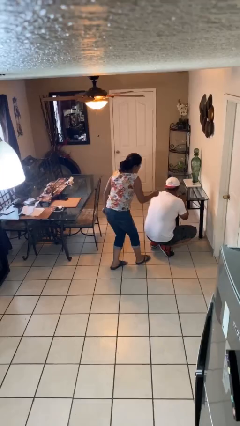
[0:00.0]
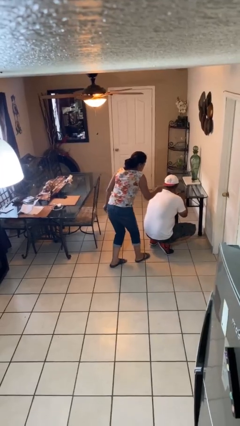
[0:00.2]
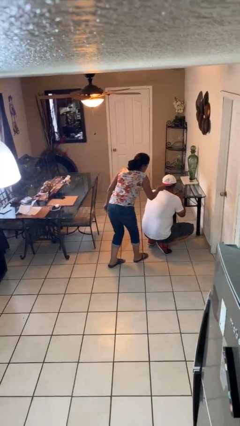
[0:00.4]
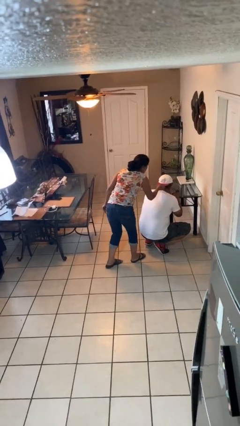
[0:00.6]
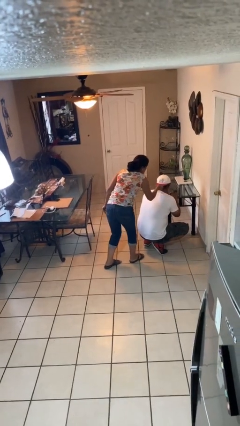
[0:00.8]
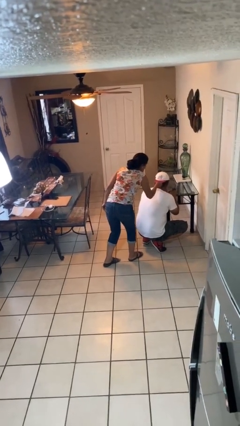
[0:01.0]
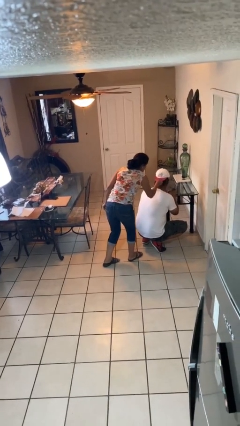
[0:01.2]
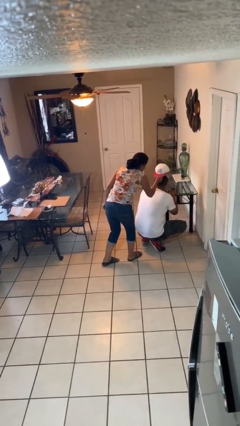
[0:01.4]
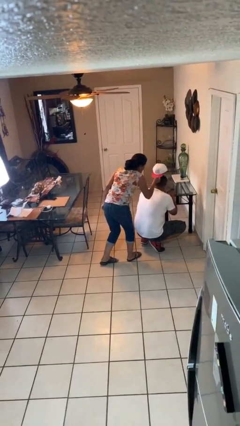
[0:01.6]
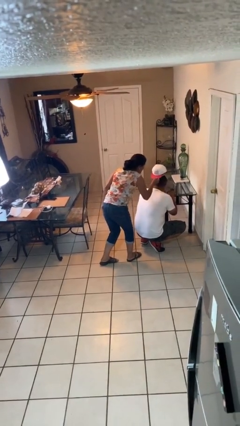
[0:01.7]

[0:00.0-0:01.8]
person steals object from person

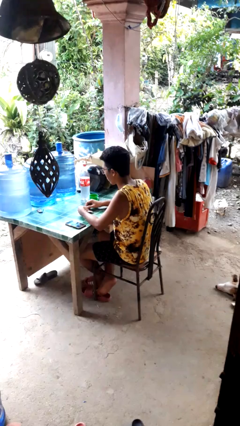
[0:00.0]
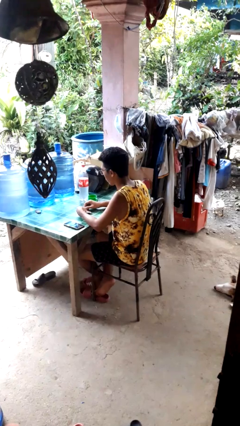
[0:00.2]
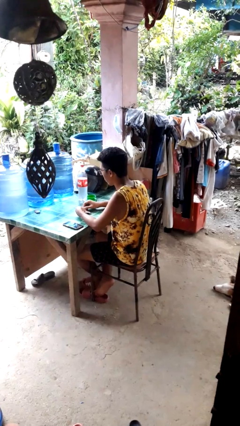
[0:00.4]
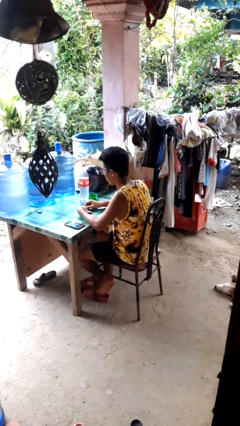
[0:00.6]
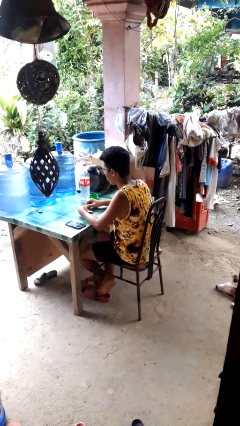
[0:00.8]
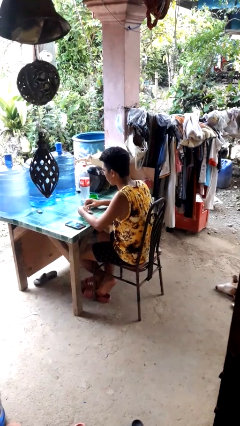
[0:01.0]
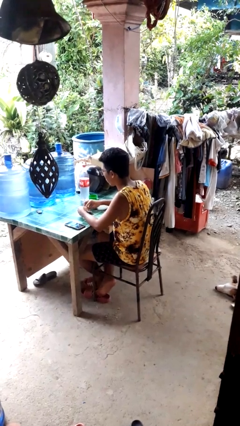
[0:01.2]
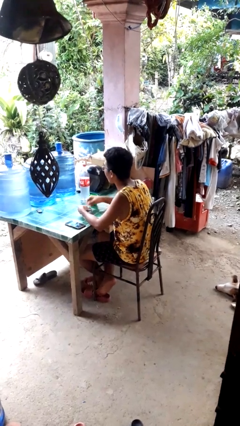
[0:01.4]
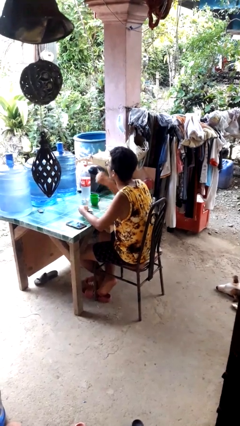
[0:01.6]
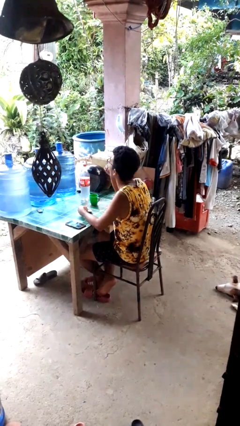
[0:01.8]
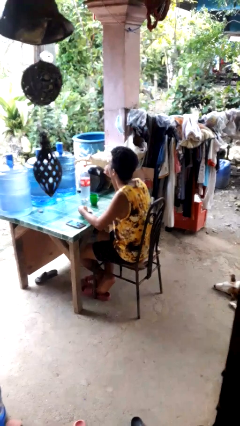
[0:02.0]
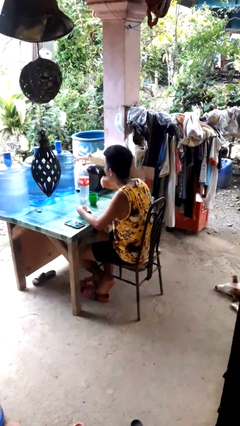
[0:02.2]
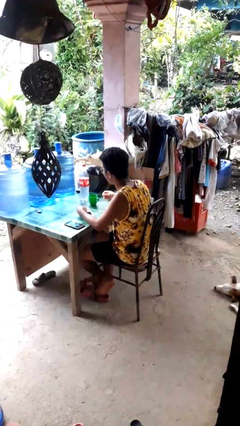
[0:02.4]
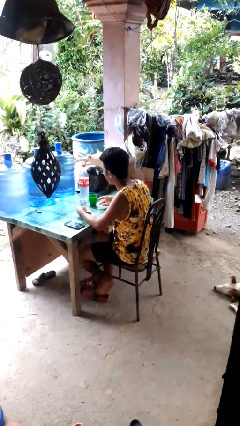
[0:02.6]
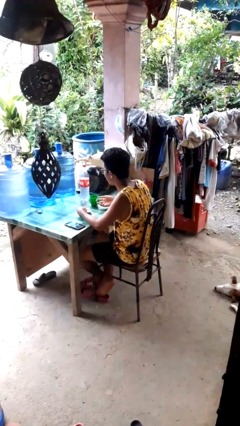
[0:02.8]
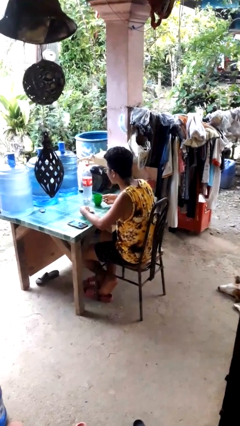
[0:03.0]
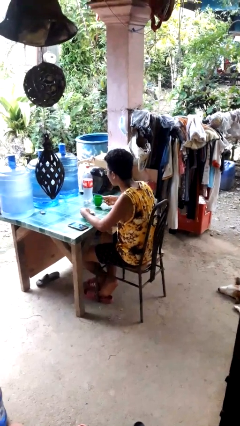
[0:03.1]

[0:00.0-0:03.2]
person takes medicine pills

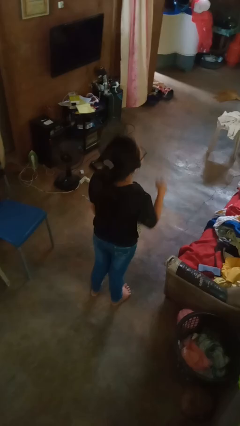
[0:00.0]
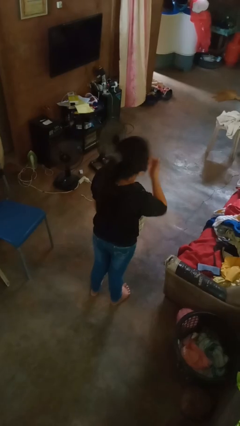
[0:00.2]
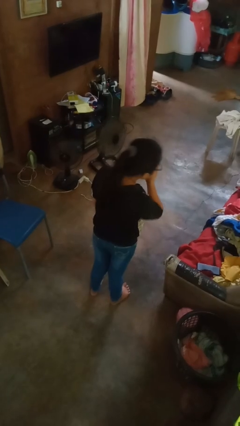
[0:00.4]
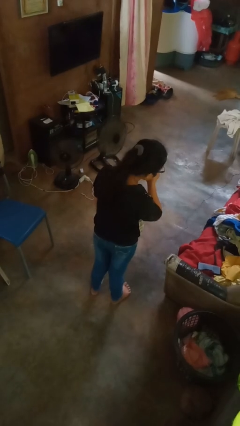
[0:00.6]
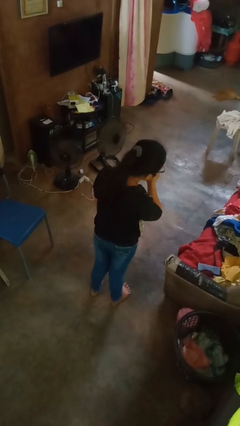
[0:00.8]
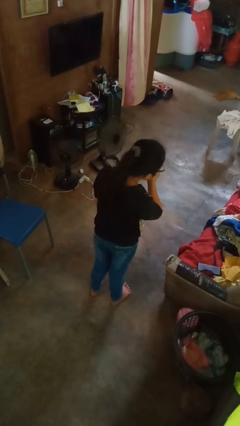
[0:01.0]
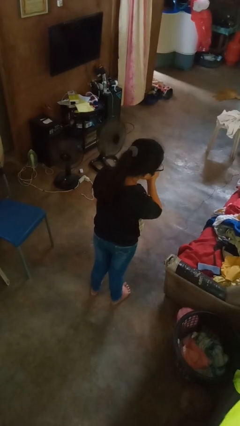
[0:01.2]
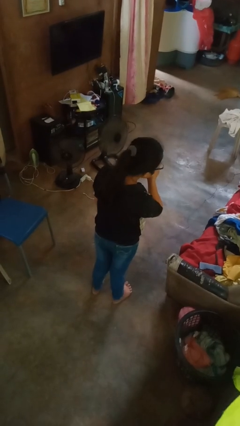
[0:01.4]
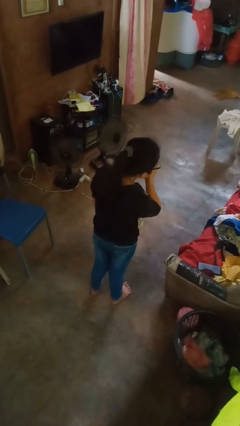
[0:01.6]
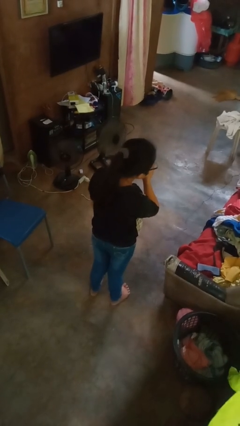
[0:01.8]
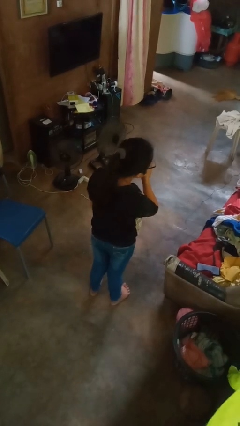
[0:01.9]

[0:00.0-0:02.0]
person sneezes into hand

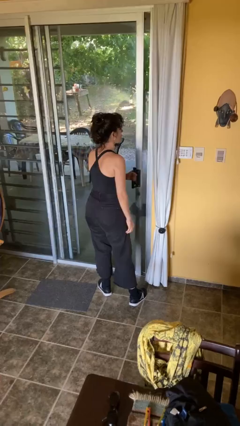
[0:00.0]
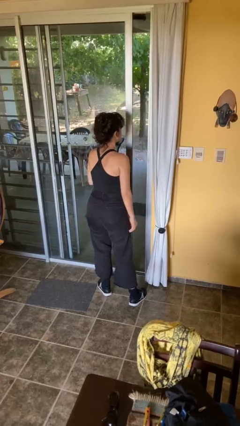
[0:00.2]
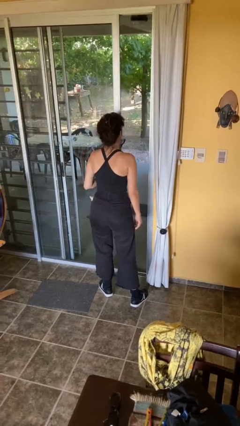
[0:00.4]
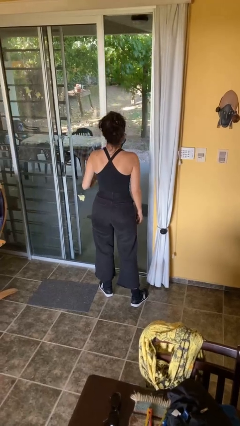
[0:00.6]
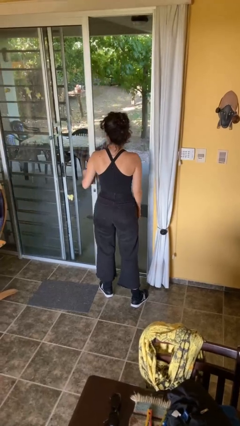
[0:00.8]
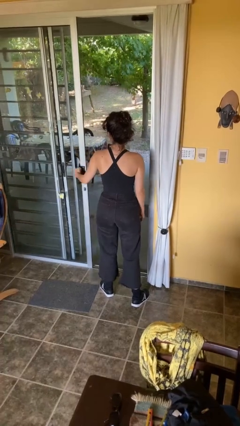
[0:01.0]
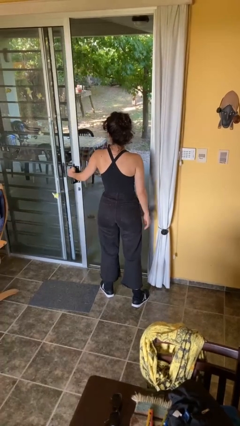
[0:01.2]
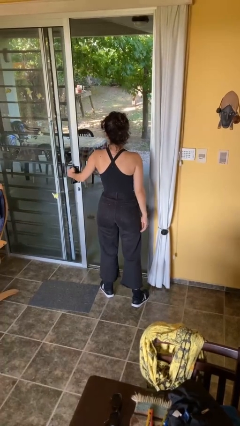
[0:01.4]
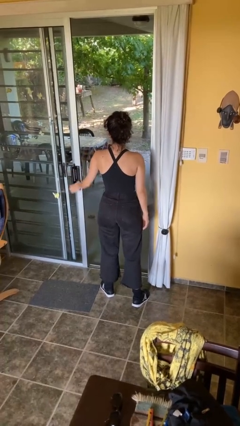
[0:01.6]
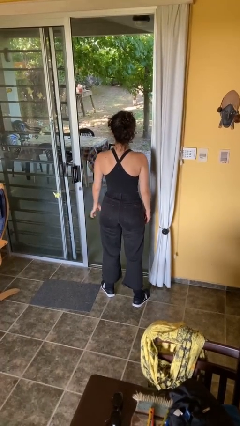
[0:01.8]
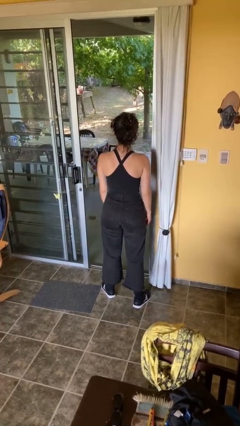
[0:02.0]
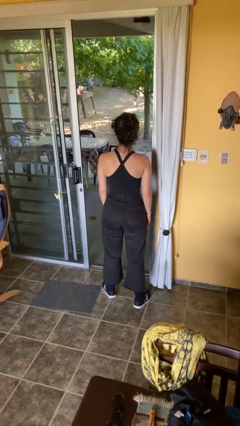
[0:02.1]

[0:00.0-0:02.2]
person opens facility door

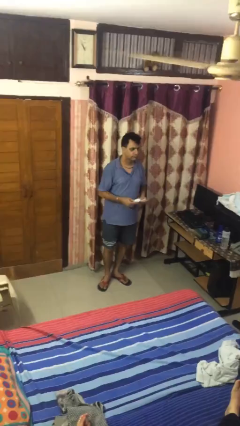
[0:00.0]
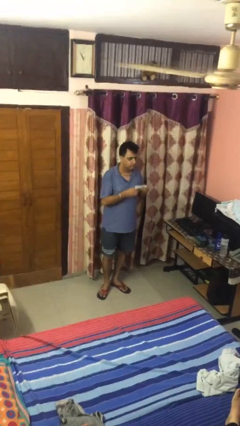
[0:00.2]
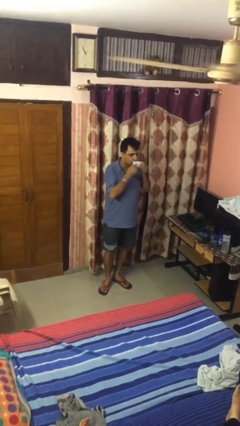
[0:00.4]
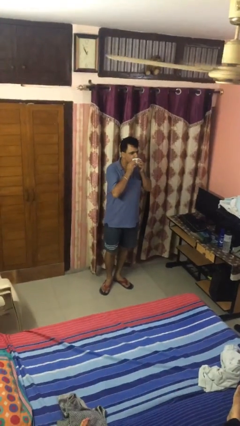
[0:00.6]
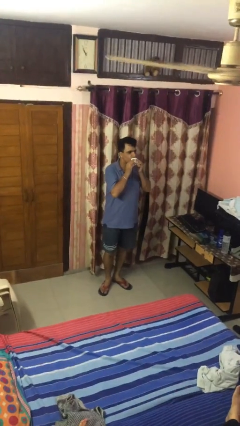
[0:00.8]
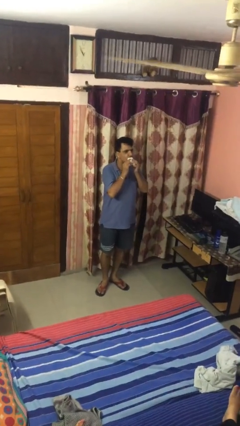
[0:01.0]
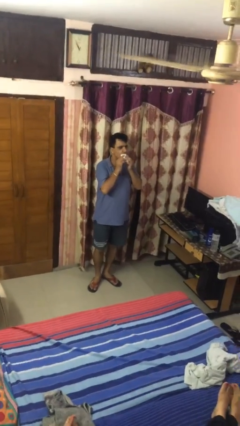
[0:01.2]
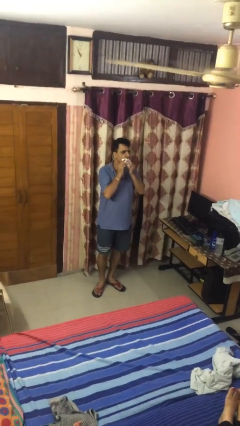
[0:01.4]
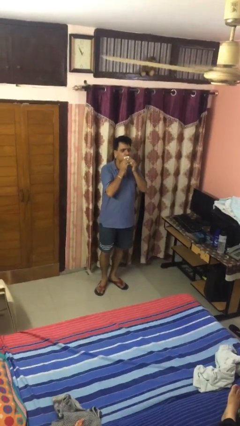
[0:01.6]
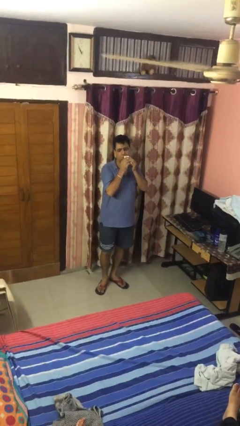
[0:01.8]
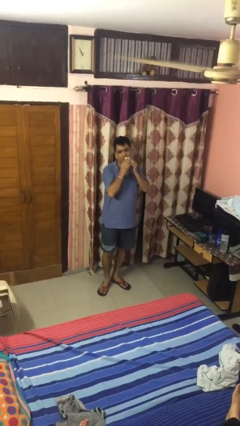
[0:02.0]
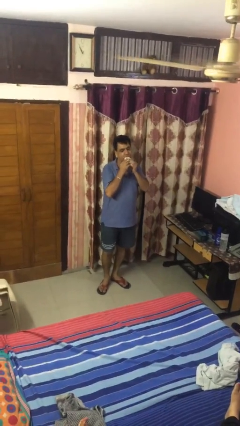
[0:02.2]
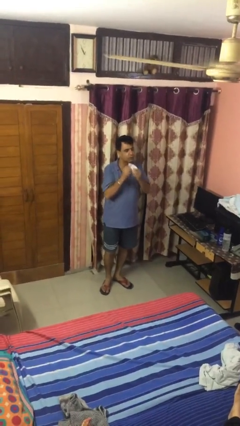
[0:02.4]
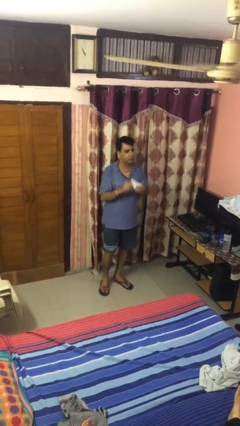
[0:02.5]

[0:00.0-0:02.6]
person wipes mouth with napkin

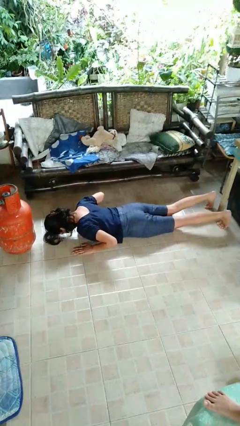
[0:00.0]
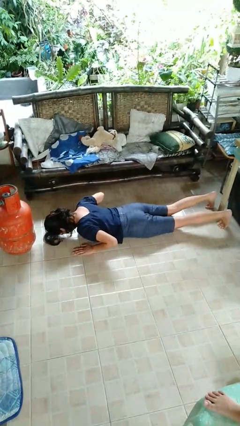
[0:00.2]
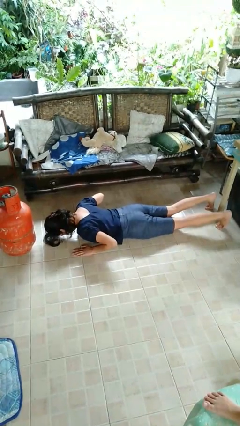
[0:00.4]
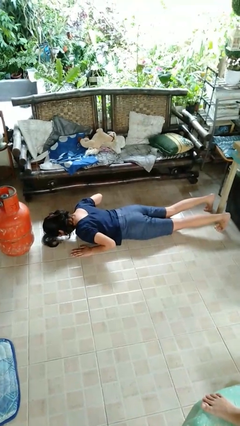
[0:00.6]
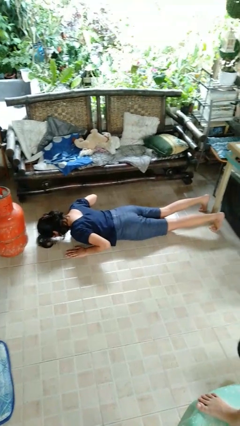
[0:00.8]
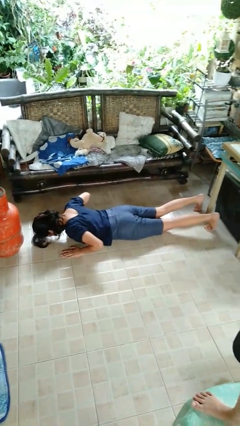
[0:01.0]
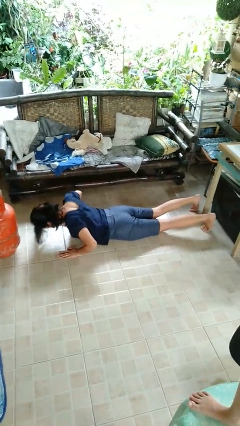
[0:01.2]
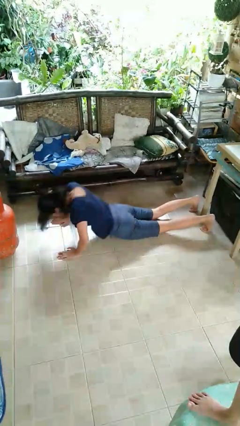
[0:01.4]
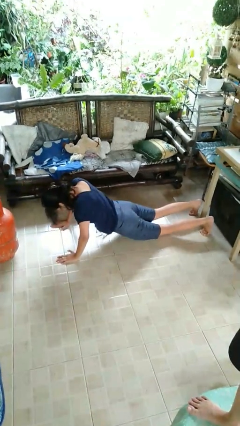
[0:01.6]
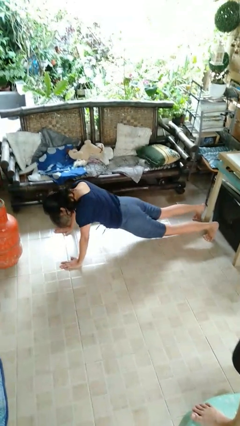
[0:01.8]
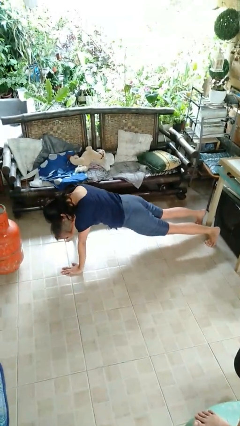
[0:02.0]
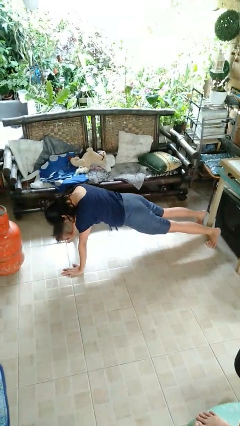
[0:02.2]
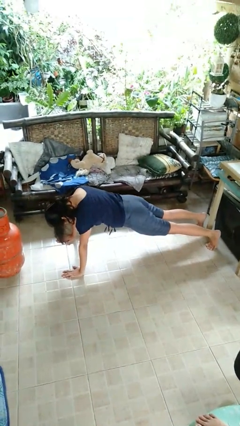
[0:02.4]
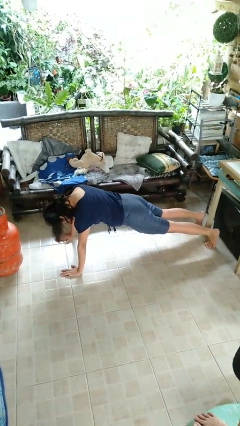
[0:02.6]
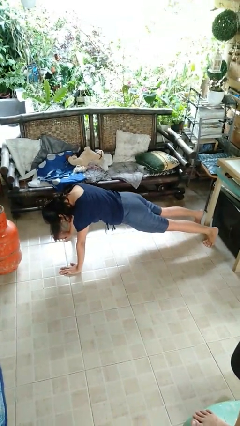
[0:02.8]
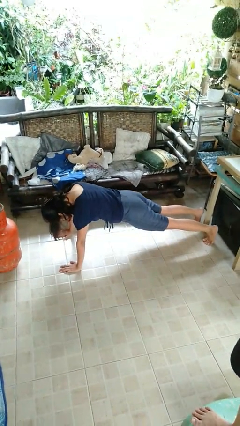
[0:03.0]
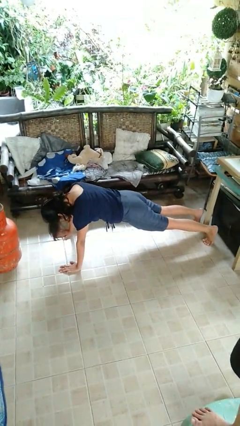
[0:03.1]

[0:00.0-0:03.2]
person exercises with pushup

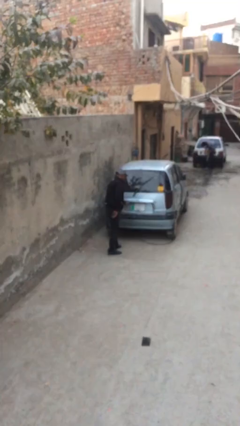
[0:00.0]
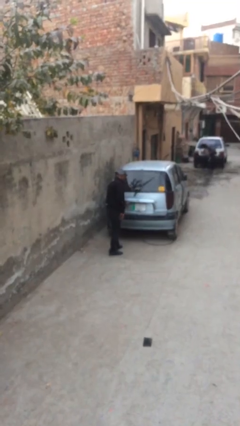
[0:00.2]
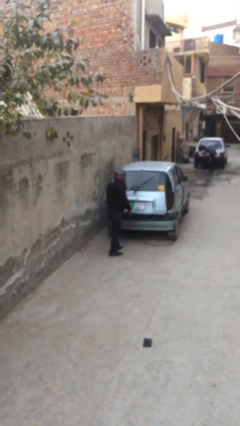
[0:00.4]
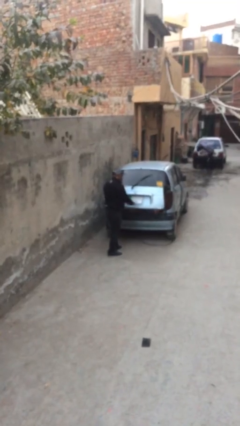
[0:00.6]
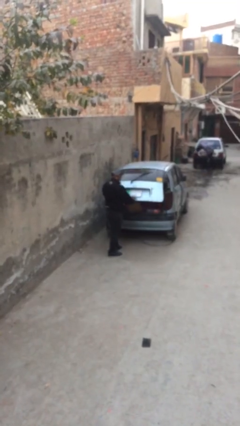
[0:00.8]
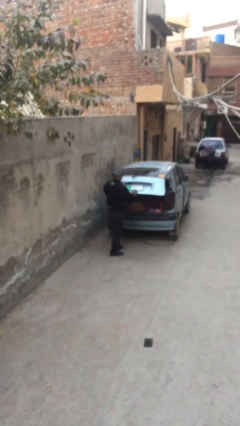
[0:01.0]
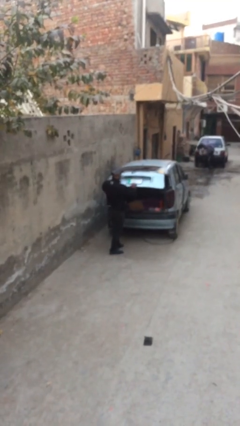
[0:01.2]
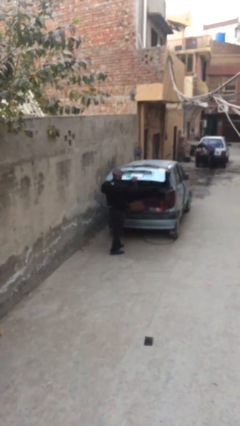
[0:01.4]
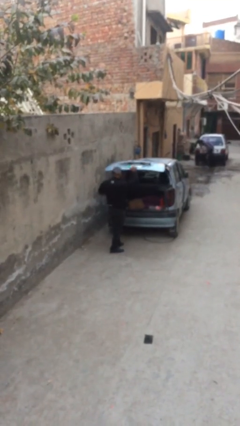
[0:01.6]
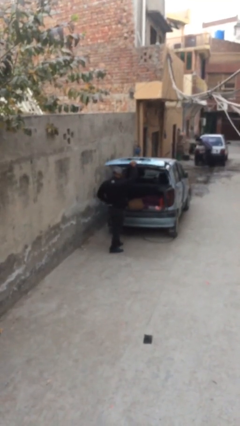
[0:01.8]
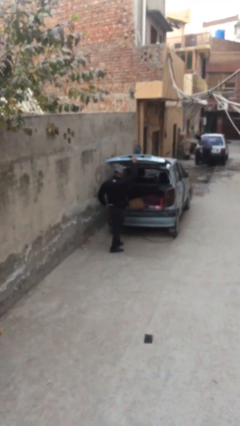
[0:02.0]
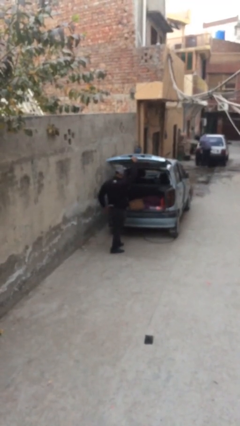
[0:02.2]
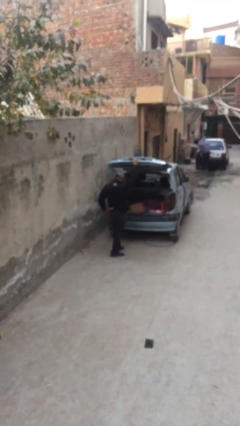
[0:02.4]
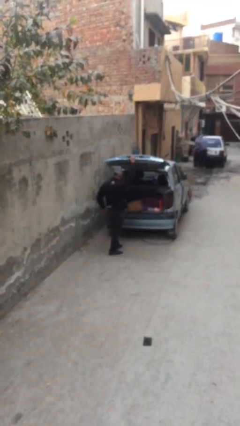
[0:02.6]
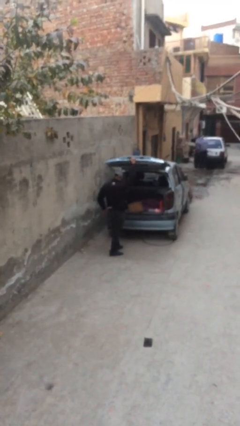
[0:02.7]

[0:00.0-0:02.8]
person opens car trunk
